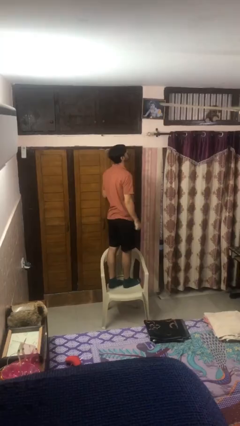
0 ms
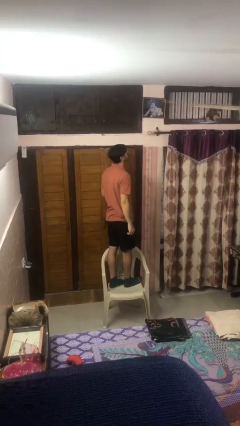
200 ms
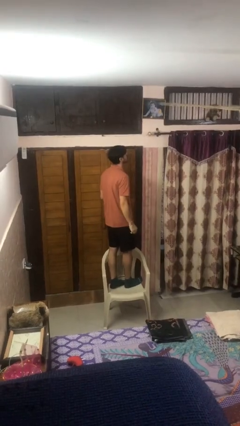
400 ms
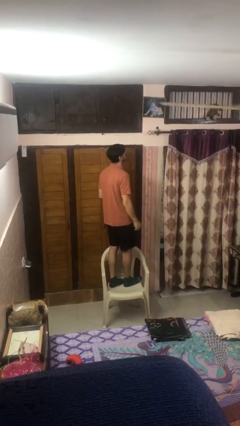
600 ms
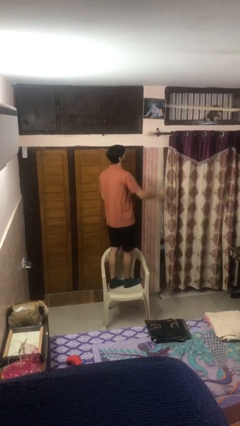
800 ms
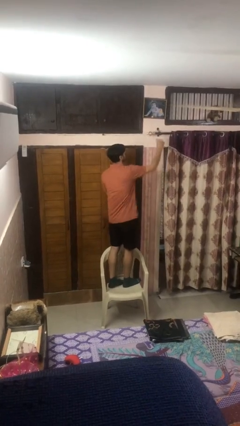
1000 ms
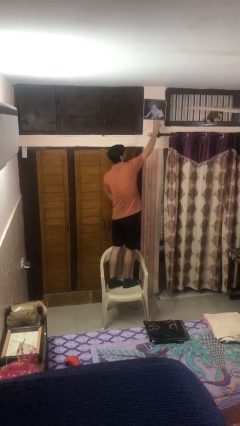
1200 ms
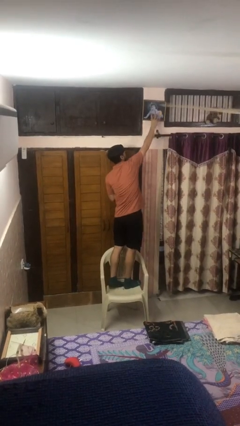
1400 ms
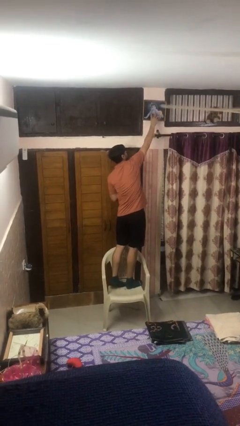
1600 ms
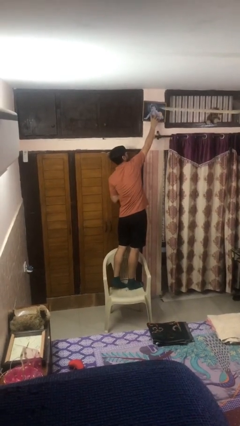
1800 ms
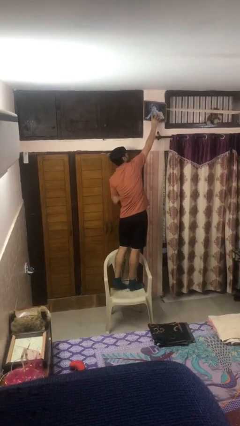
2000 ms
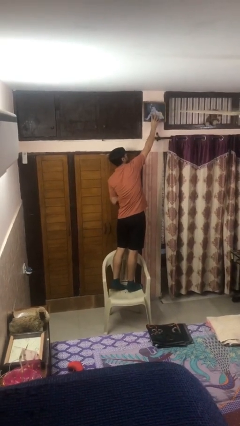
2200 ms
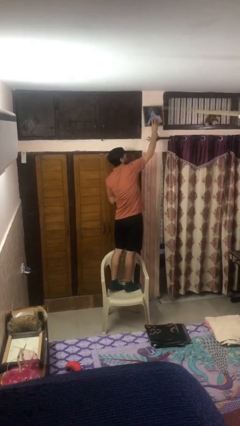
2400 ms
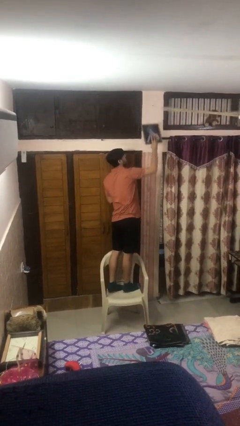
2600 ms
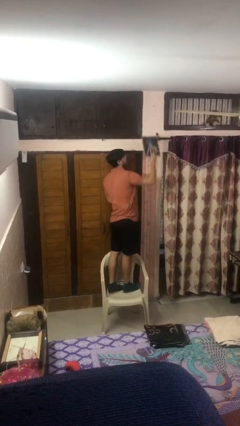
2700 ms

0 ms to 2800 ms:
person takes down picture frame

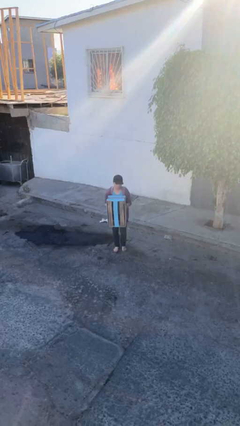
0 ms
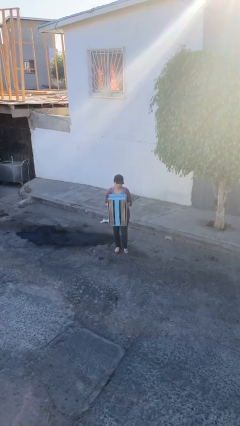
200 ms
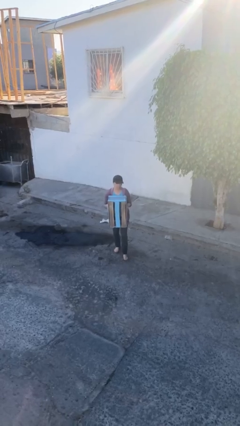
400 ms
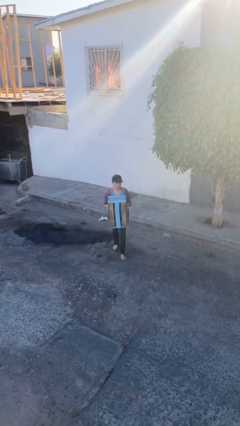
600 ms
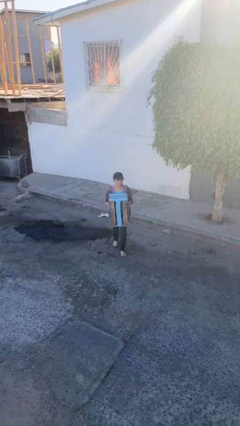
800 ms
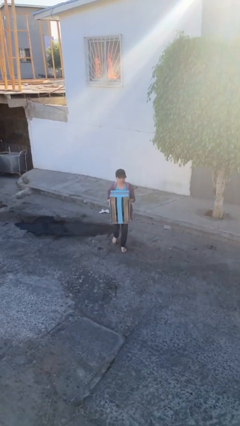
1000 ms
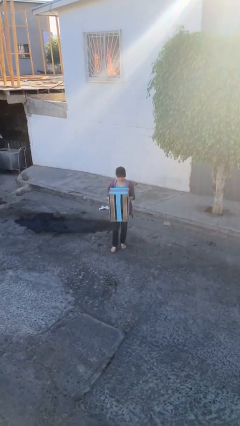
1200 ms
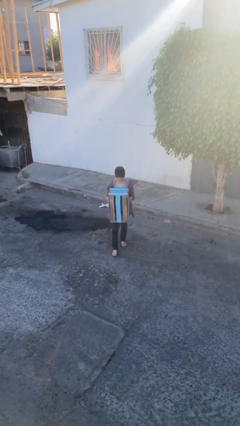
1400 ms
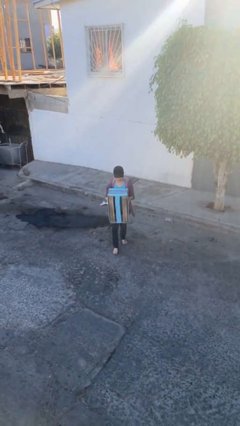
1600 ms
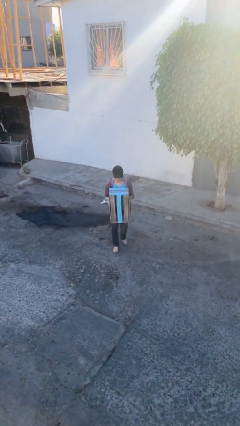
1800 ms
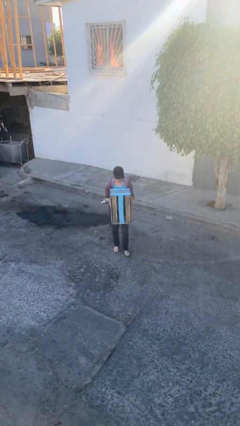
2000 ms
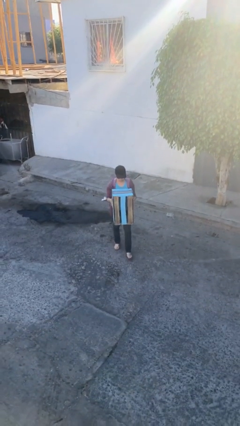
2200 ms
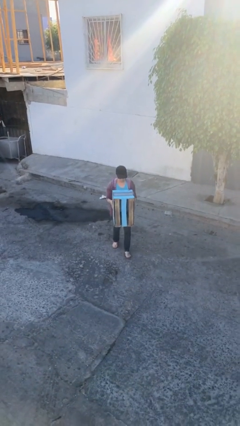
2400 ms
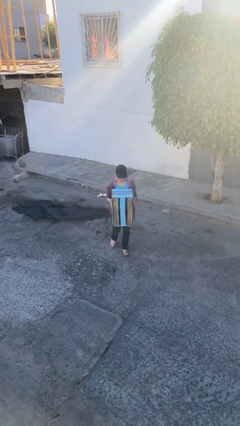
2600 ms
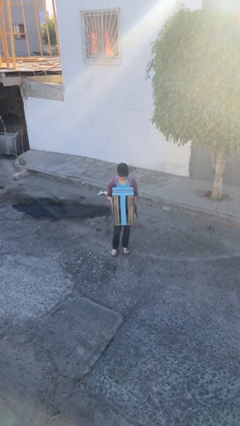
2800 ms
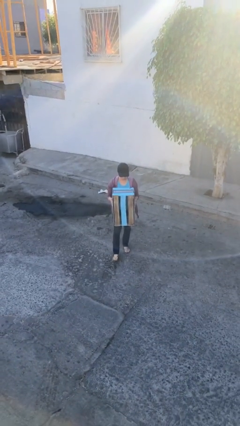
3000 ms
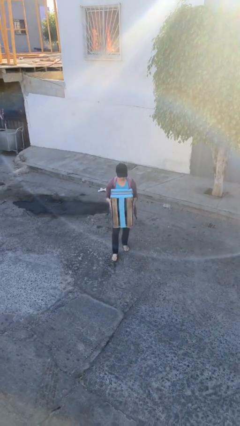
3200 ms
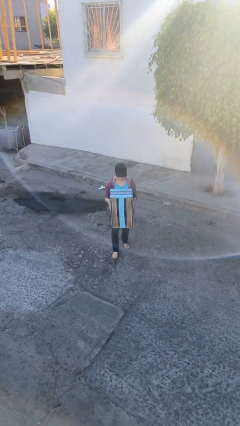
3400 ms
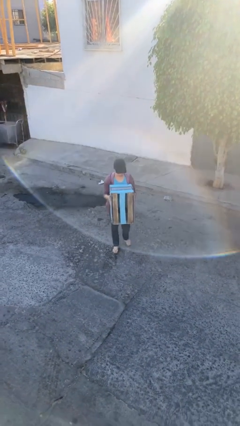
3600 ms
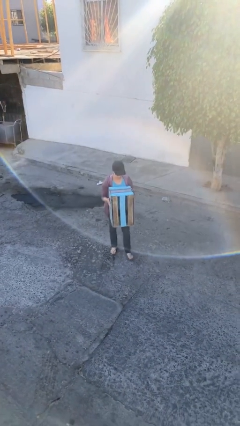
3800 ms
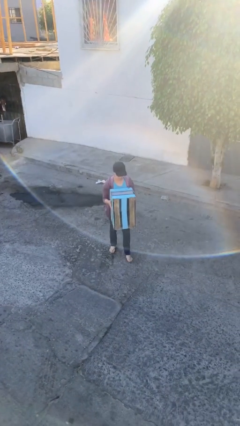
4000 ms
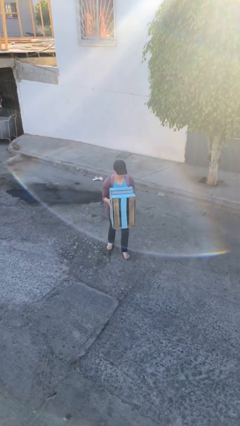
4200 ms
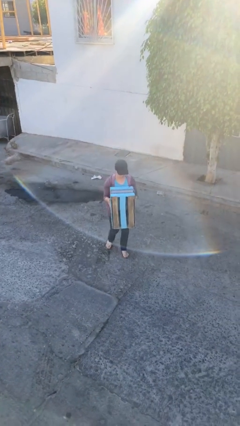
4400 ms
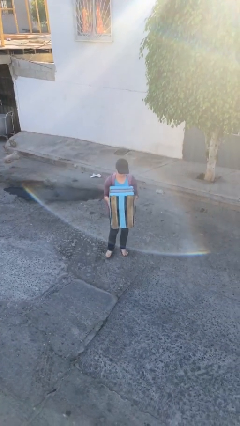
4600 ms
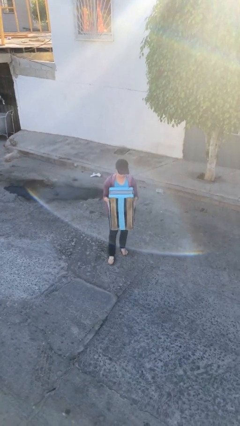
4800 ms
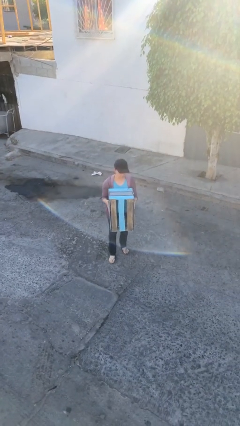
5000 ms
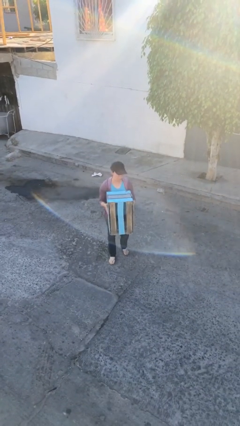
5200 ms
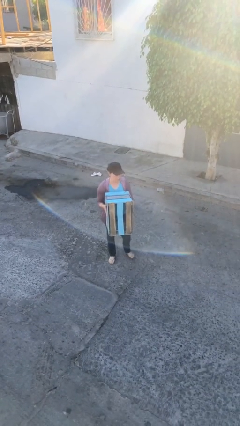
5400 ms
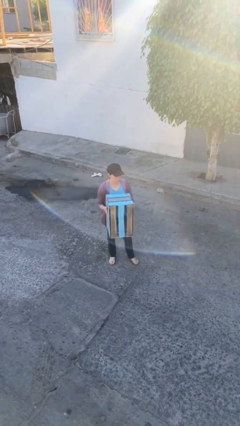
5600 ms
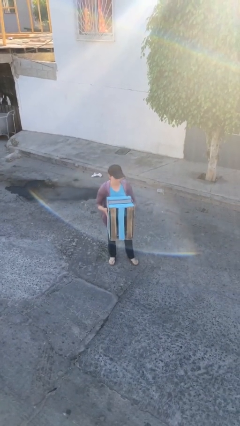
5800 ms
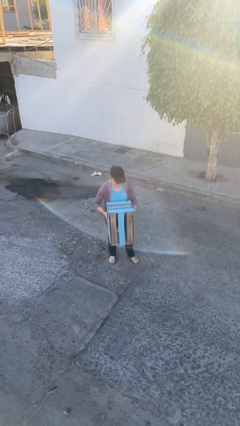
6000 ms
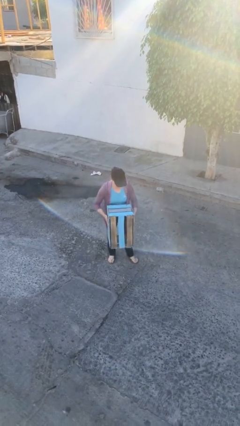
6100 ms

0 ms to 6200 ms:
person carries heavy object

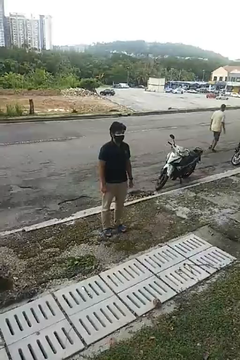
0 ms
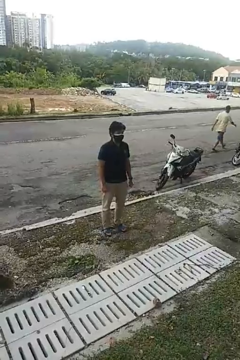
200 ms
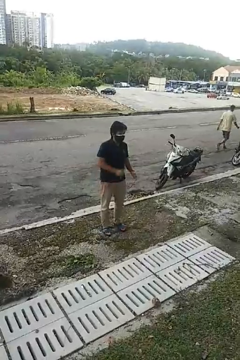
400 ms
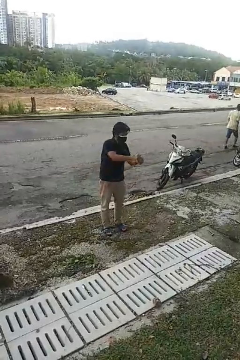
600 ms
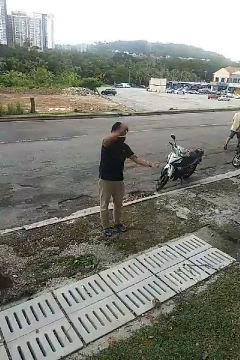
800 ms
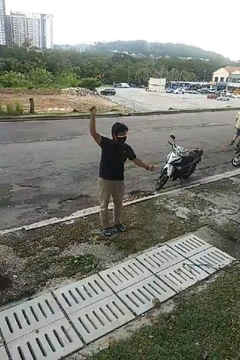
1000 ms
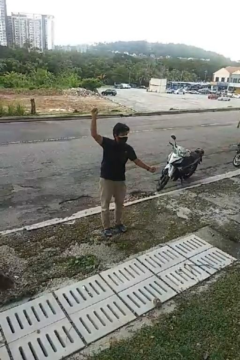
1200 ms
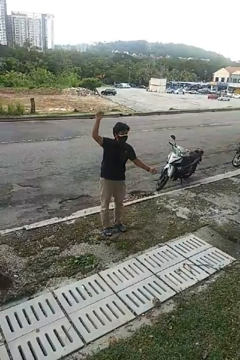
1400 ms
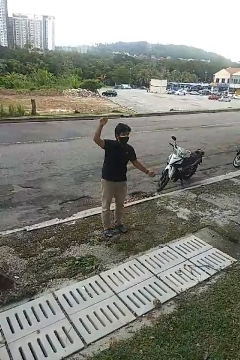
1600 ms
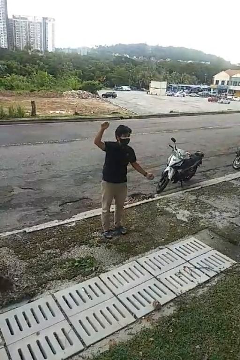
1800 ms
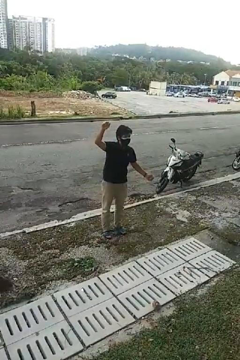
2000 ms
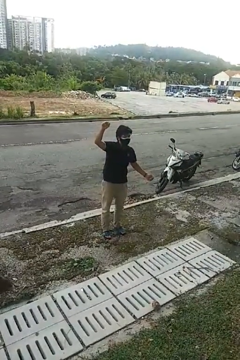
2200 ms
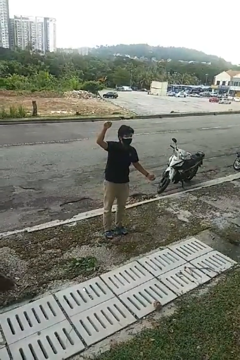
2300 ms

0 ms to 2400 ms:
person gestures zoom in

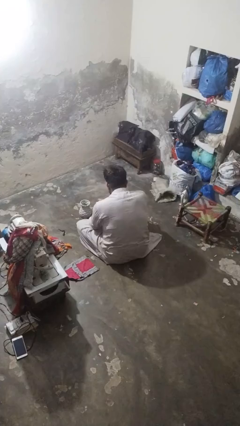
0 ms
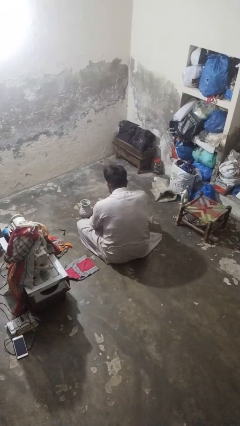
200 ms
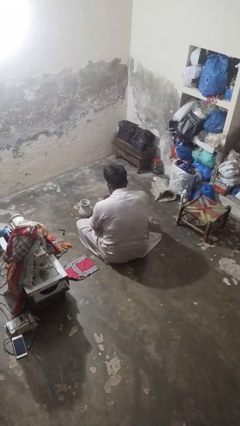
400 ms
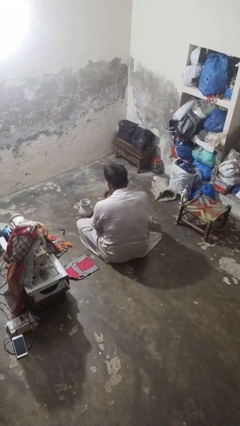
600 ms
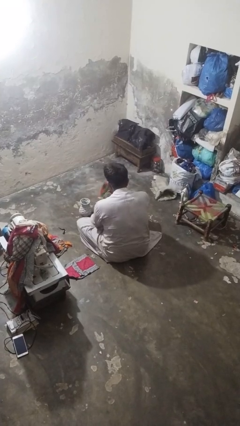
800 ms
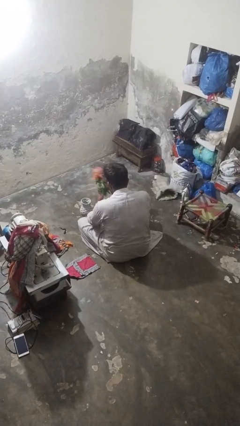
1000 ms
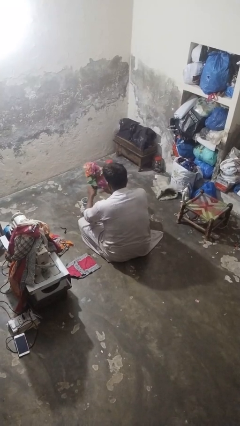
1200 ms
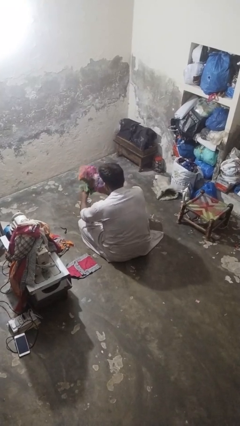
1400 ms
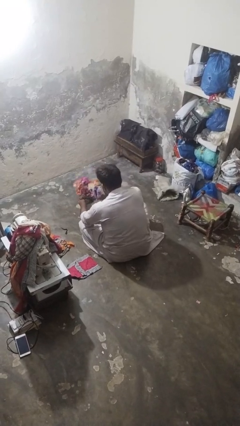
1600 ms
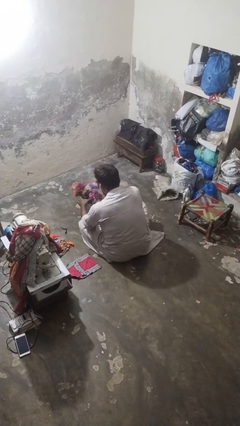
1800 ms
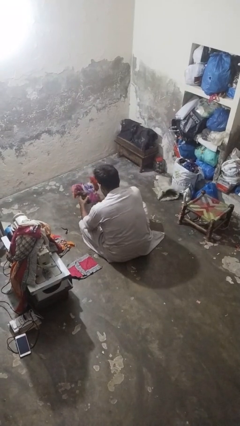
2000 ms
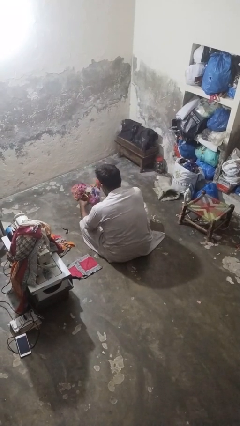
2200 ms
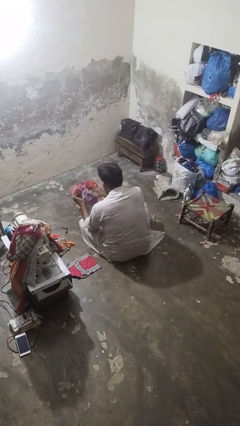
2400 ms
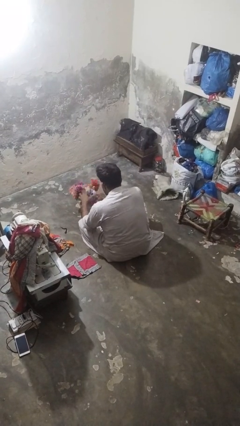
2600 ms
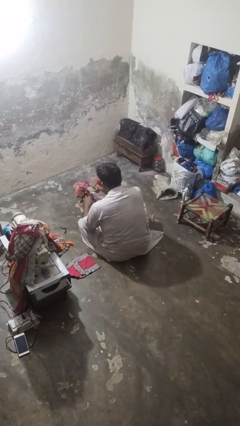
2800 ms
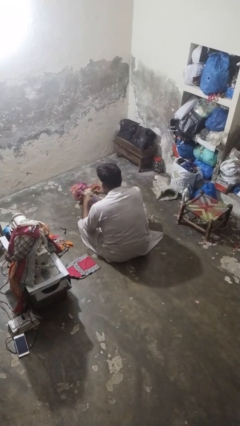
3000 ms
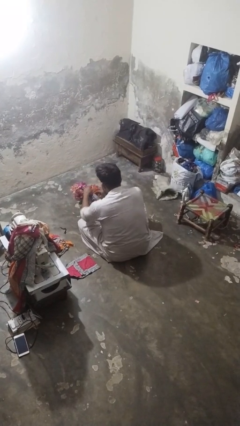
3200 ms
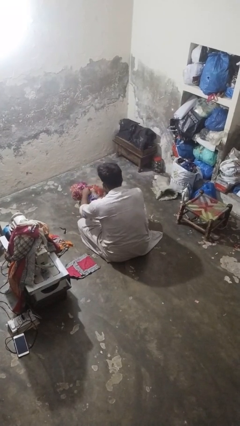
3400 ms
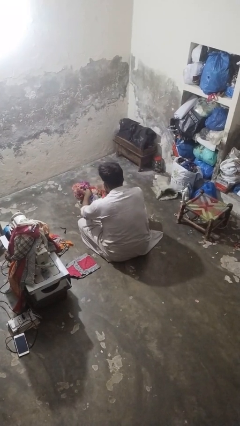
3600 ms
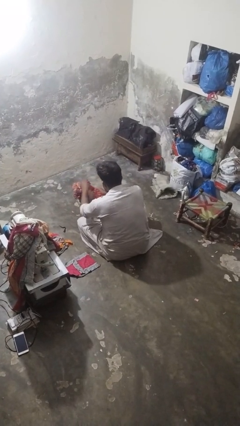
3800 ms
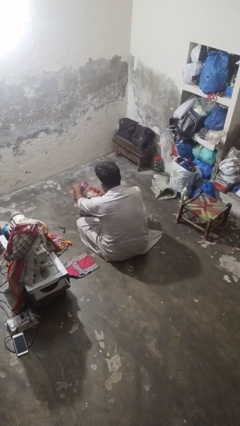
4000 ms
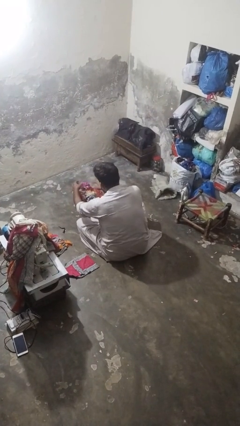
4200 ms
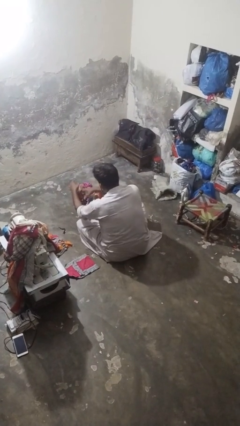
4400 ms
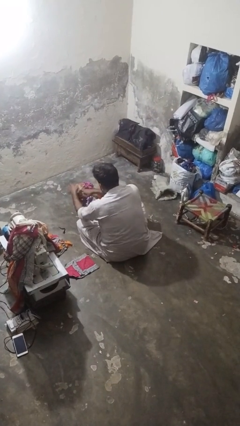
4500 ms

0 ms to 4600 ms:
person arranges flowers in vase

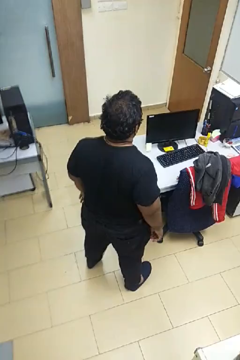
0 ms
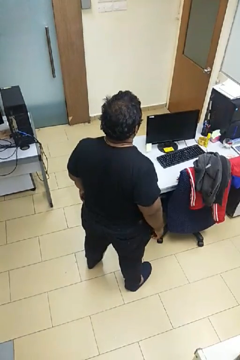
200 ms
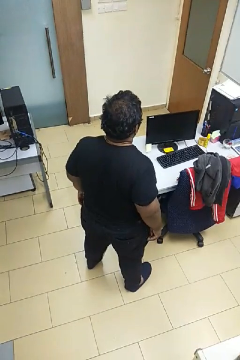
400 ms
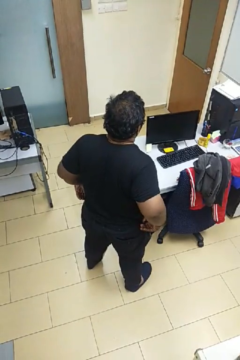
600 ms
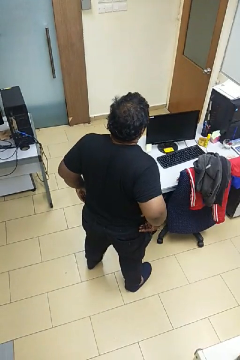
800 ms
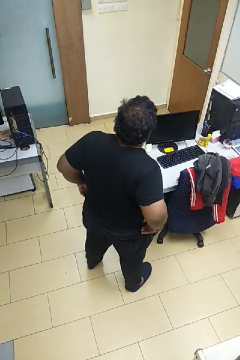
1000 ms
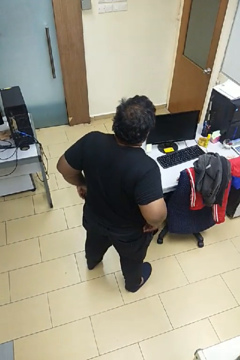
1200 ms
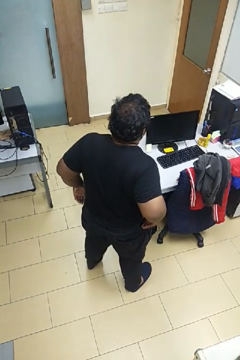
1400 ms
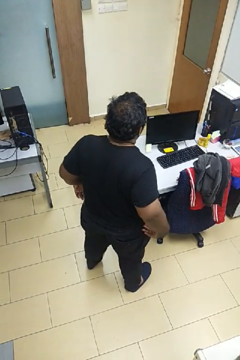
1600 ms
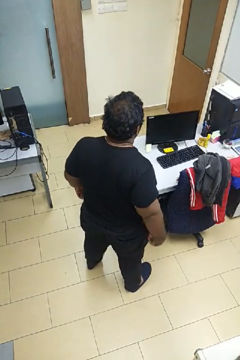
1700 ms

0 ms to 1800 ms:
person hikes up pants

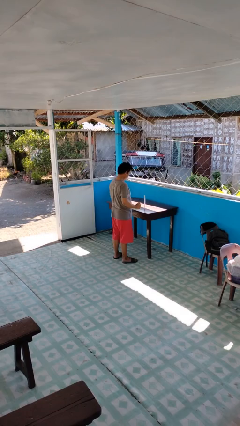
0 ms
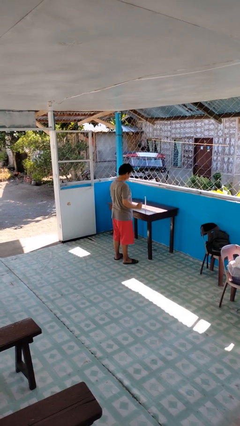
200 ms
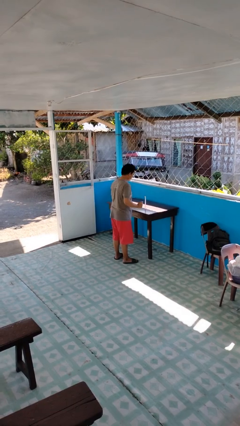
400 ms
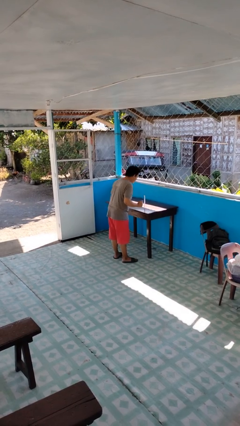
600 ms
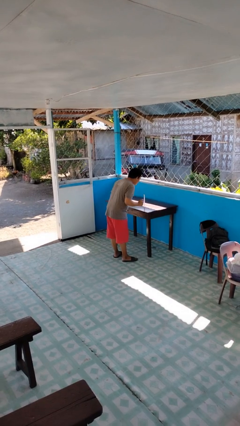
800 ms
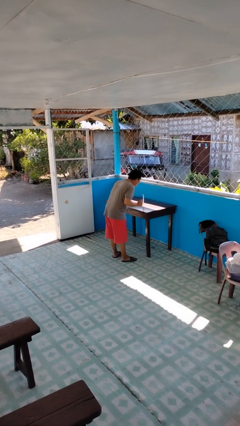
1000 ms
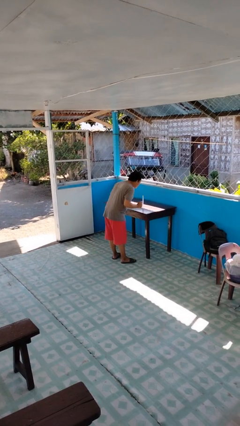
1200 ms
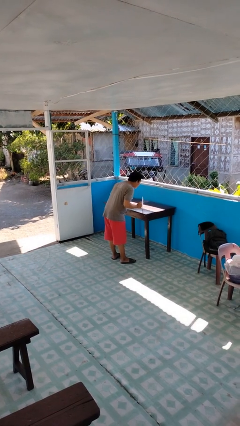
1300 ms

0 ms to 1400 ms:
person extinguishes candle
